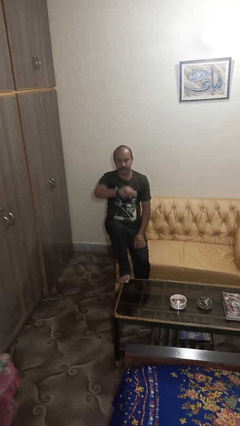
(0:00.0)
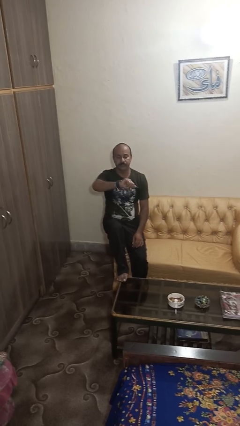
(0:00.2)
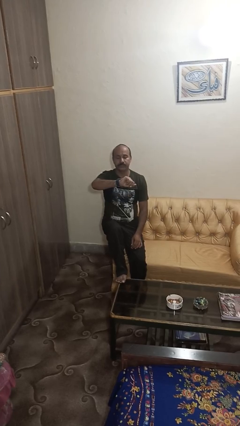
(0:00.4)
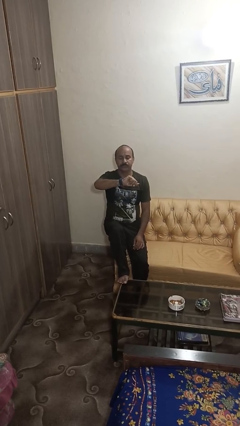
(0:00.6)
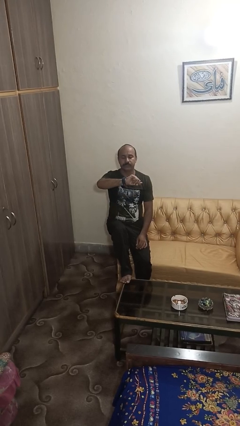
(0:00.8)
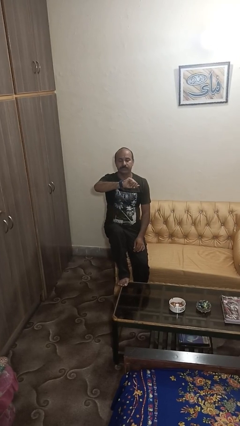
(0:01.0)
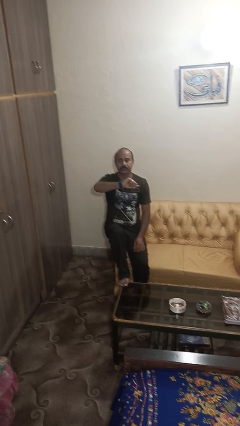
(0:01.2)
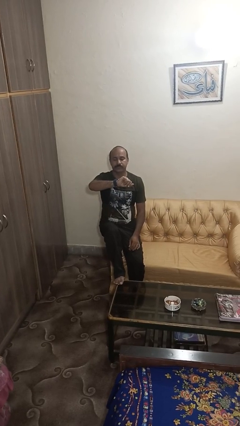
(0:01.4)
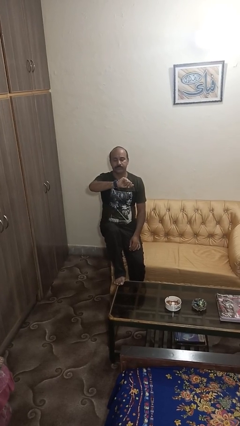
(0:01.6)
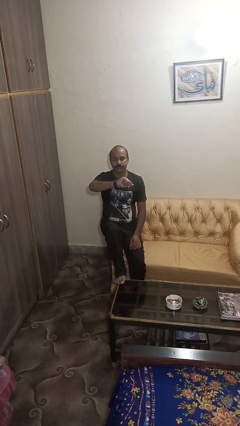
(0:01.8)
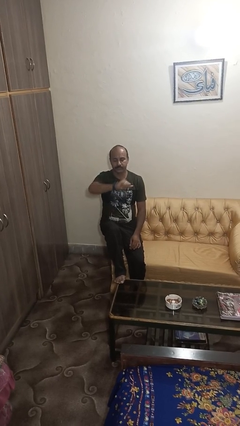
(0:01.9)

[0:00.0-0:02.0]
person looks at wristwatch

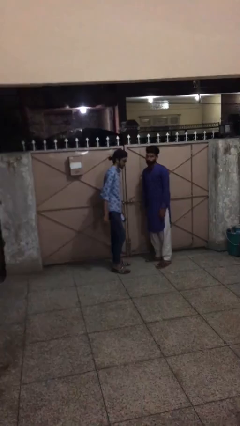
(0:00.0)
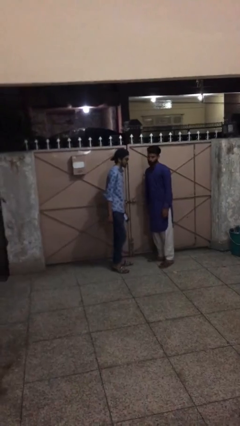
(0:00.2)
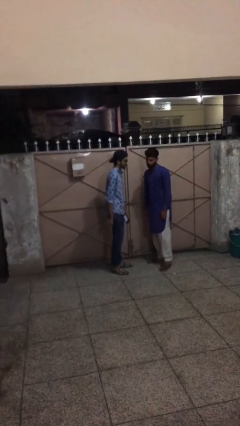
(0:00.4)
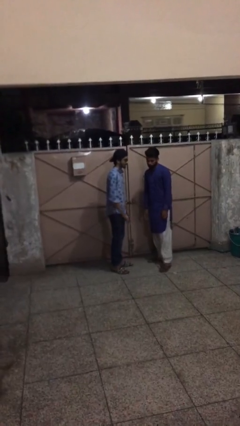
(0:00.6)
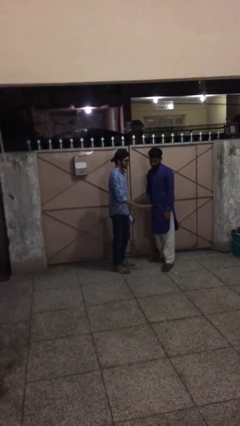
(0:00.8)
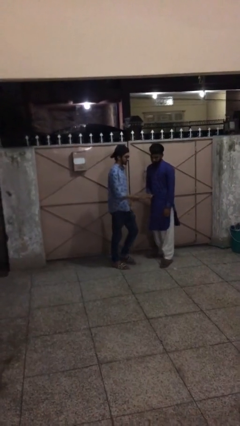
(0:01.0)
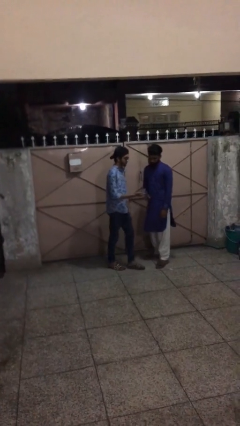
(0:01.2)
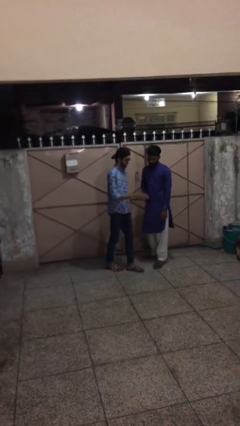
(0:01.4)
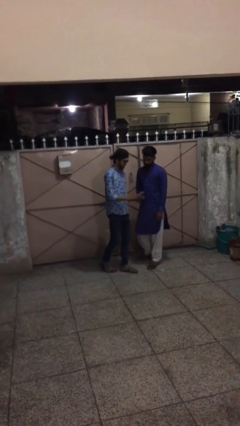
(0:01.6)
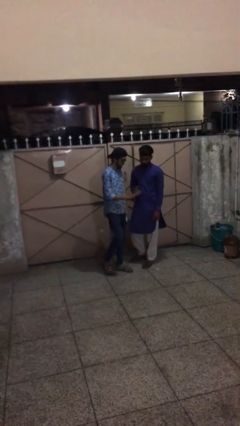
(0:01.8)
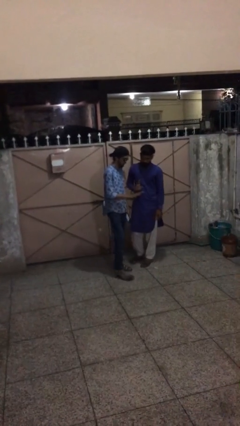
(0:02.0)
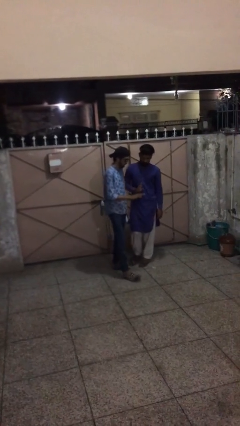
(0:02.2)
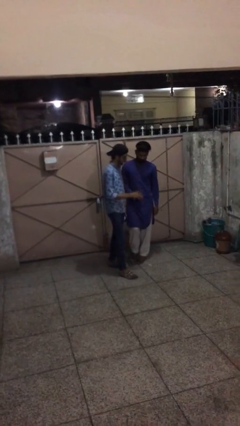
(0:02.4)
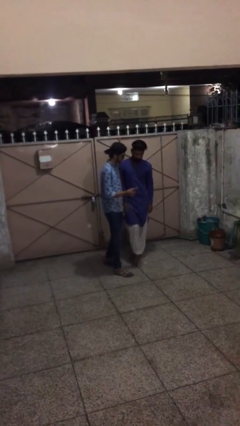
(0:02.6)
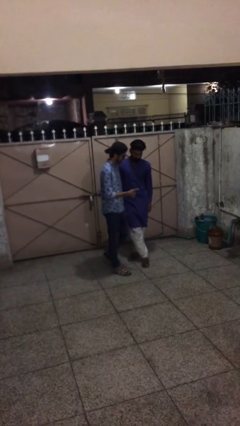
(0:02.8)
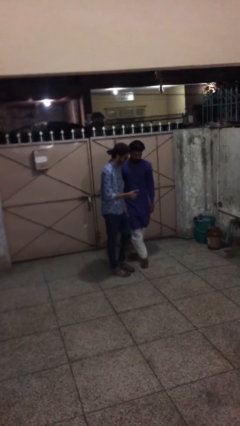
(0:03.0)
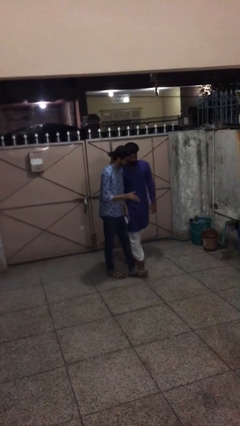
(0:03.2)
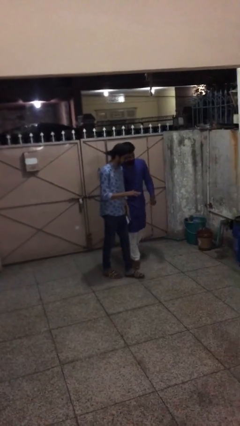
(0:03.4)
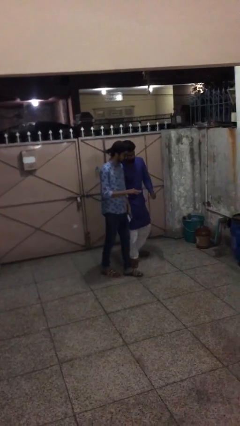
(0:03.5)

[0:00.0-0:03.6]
person talks to person

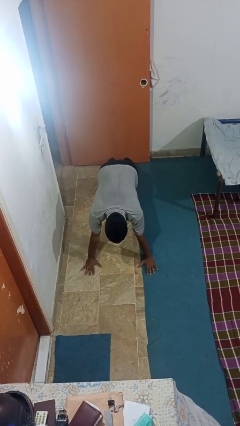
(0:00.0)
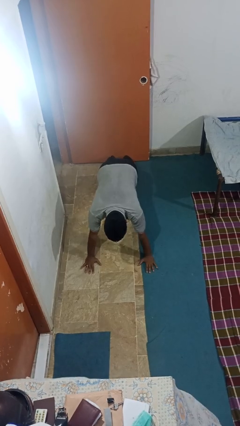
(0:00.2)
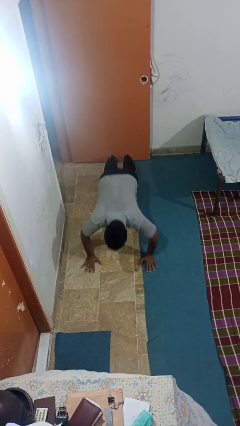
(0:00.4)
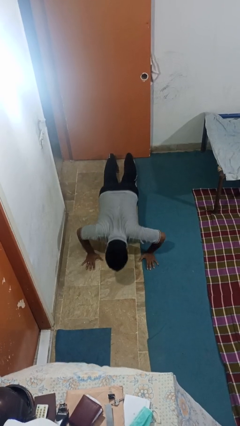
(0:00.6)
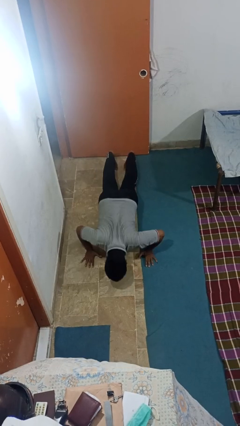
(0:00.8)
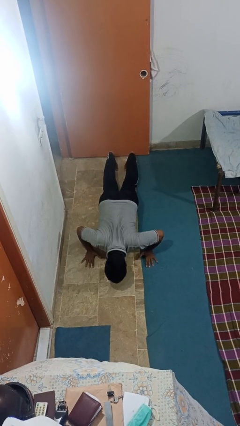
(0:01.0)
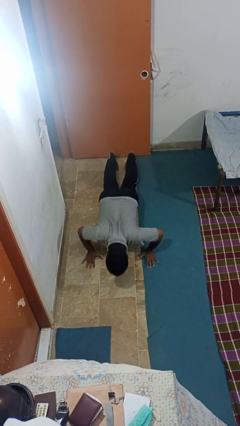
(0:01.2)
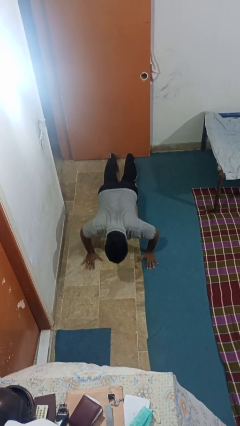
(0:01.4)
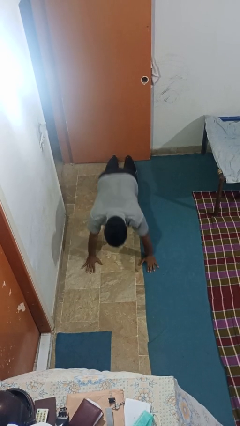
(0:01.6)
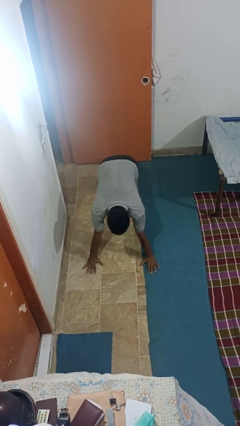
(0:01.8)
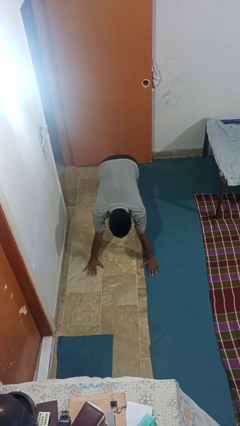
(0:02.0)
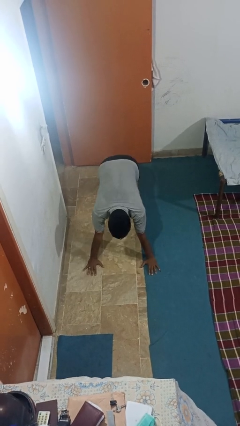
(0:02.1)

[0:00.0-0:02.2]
person exercises with pushup

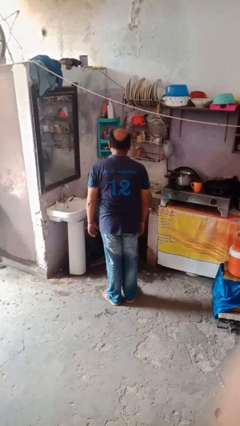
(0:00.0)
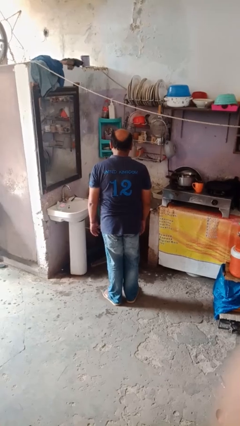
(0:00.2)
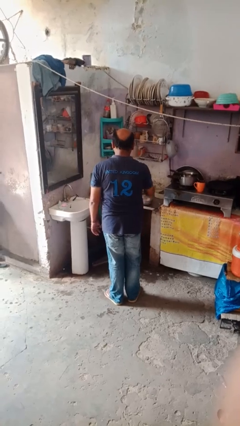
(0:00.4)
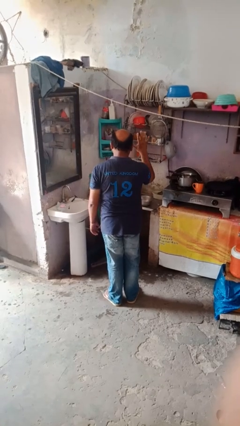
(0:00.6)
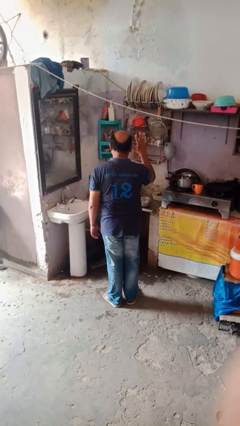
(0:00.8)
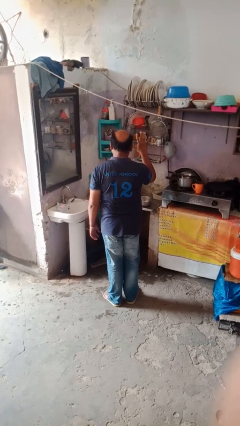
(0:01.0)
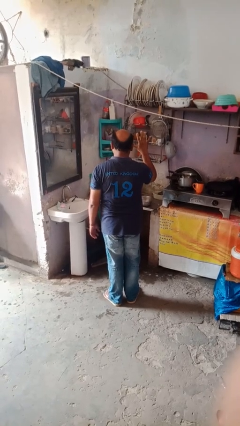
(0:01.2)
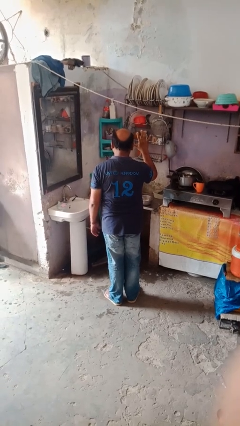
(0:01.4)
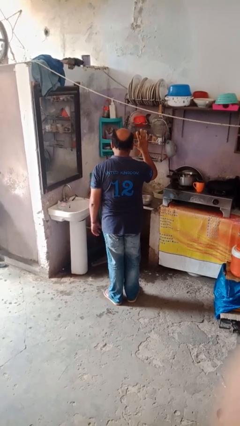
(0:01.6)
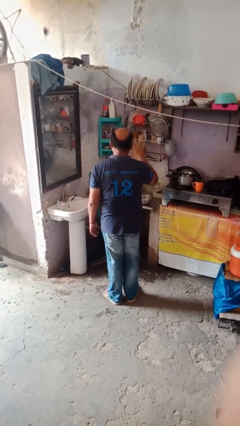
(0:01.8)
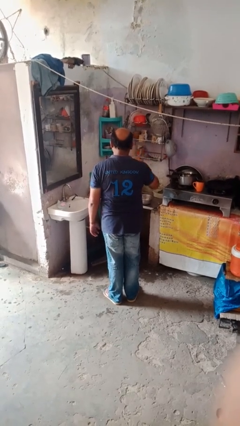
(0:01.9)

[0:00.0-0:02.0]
person gestures number five

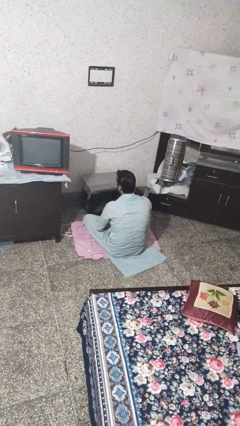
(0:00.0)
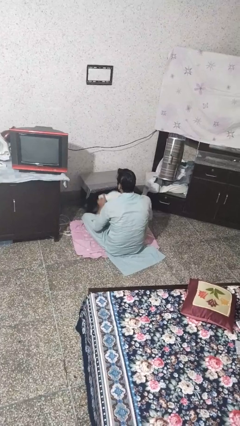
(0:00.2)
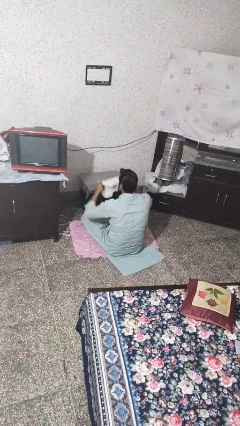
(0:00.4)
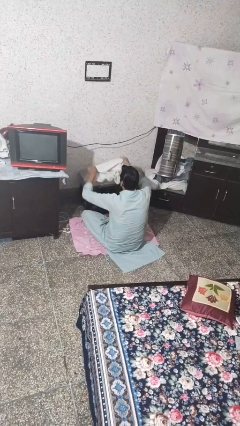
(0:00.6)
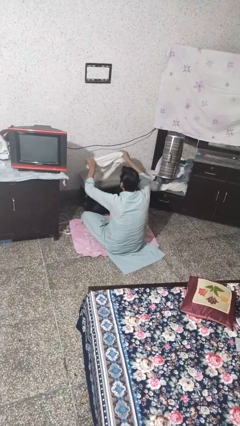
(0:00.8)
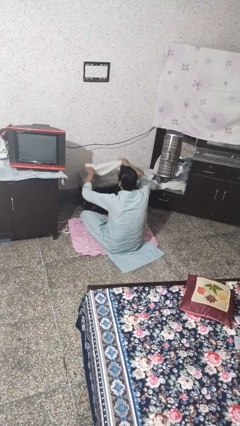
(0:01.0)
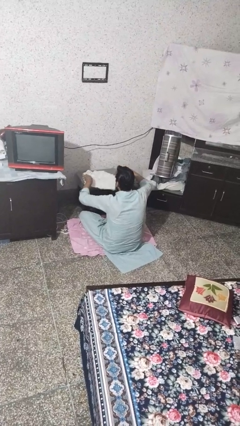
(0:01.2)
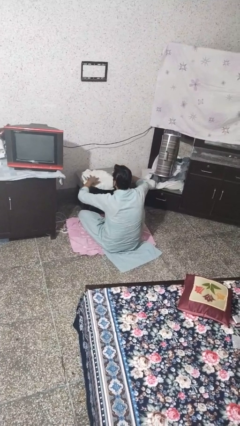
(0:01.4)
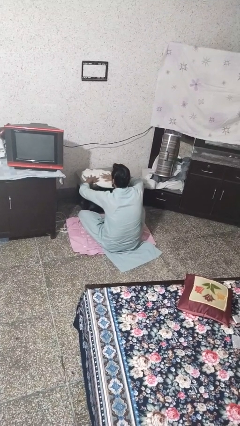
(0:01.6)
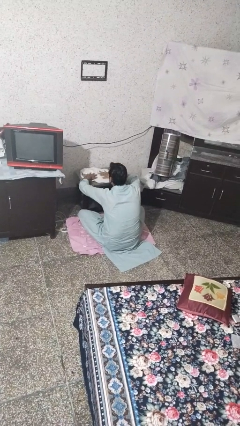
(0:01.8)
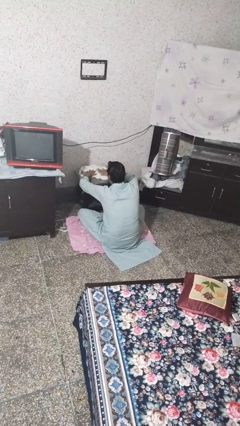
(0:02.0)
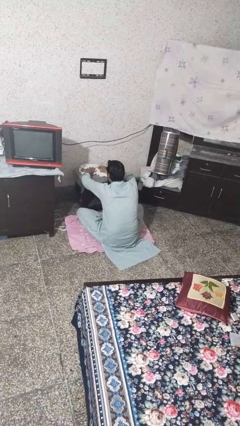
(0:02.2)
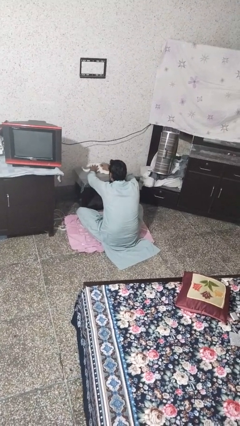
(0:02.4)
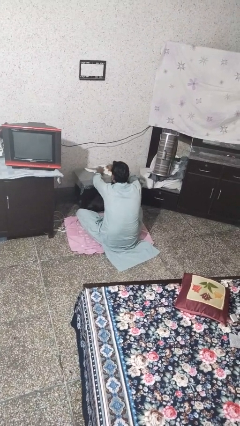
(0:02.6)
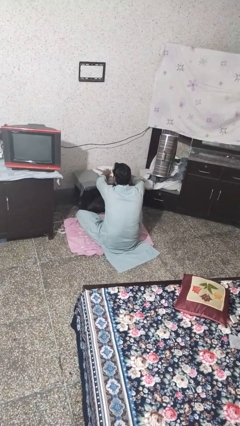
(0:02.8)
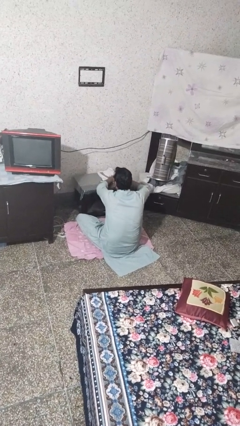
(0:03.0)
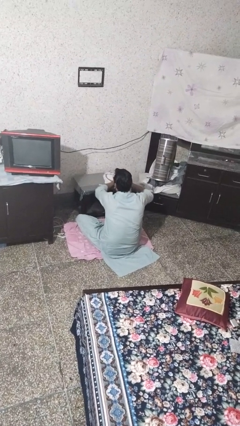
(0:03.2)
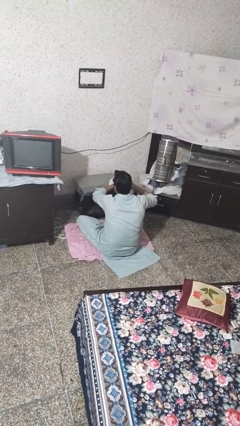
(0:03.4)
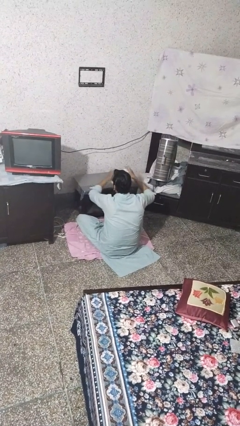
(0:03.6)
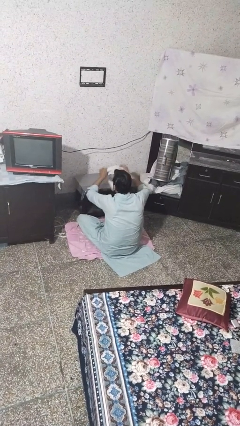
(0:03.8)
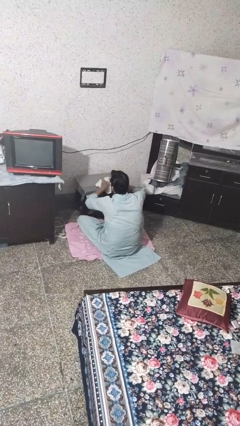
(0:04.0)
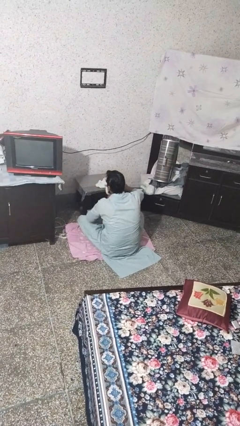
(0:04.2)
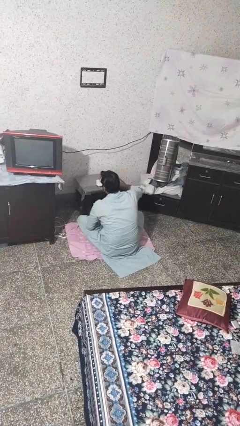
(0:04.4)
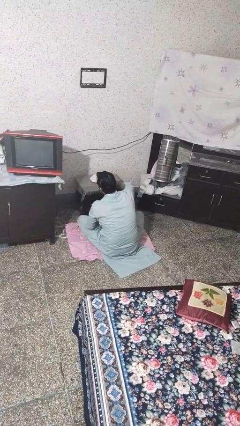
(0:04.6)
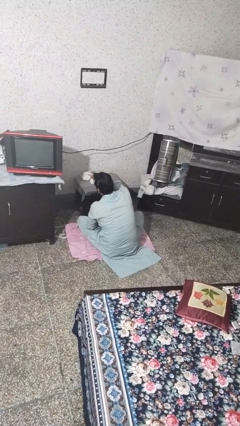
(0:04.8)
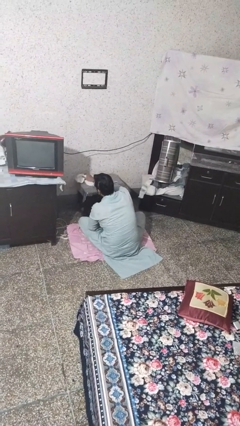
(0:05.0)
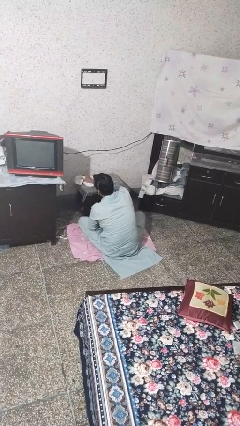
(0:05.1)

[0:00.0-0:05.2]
person cleans table with rag

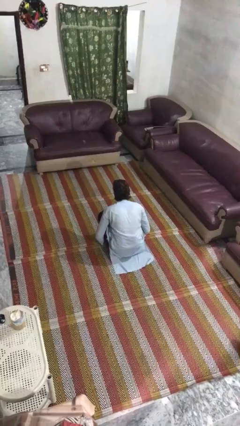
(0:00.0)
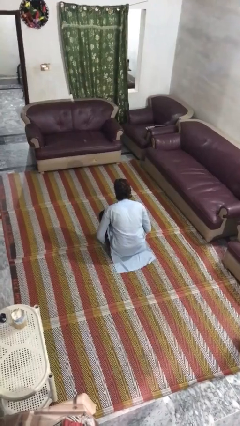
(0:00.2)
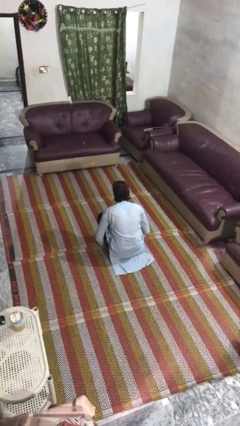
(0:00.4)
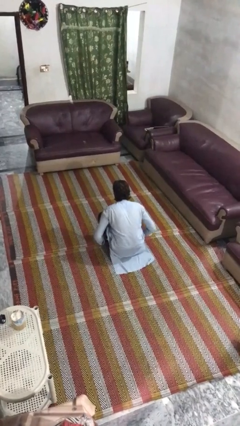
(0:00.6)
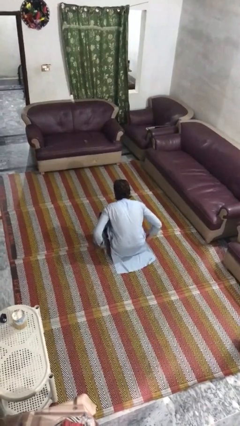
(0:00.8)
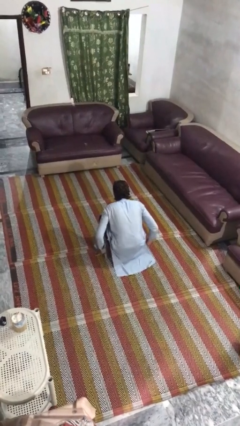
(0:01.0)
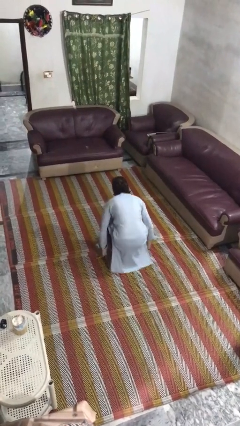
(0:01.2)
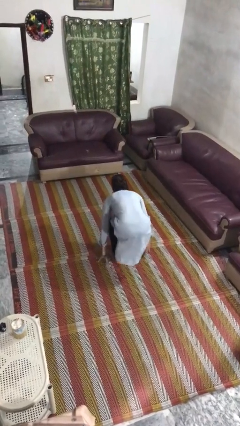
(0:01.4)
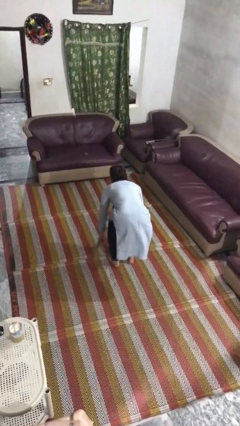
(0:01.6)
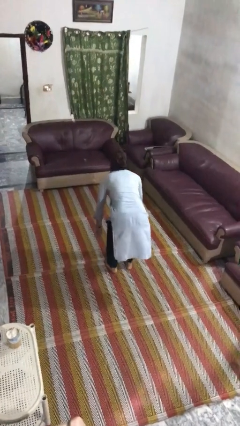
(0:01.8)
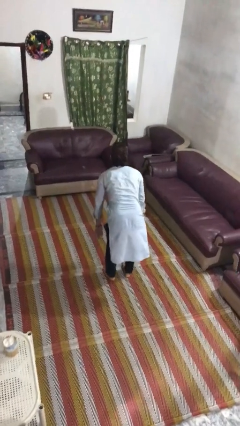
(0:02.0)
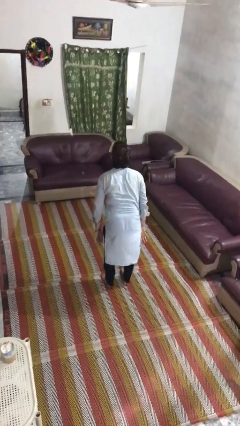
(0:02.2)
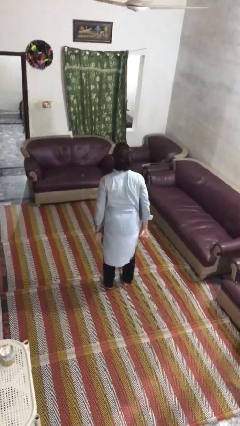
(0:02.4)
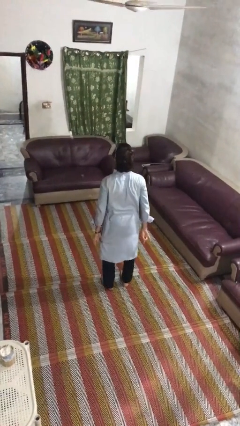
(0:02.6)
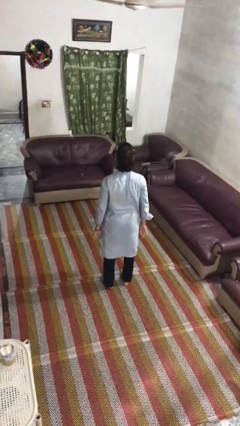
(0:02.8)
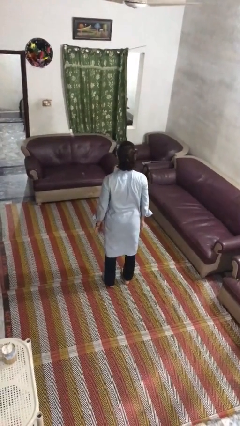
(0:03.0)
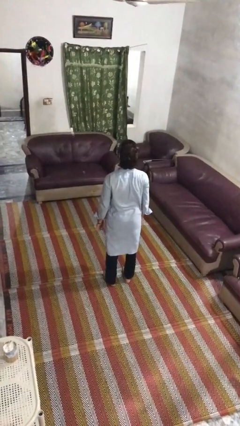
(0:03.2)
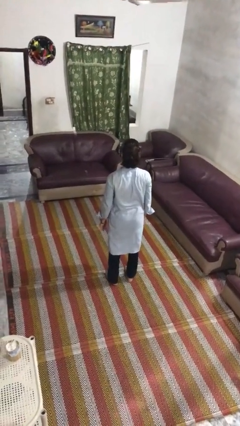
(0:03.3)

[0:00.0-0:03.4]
person stands up
